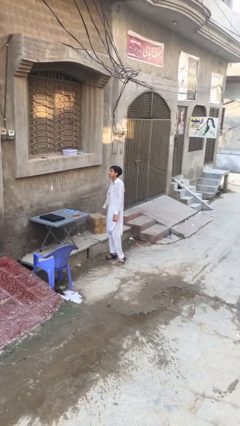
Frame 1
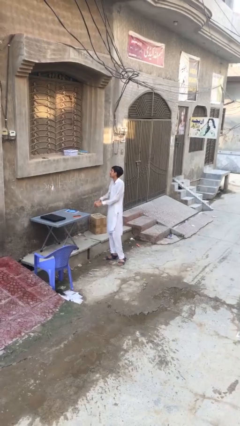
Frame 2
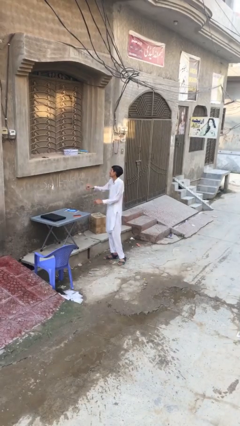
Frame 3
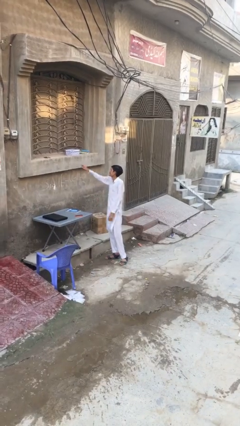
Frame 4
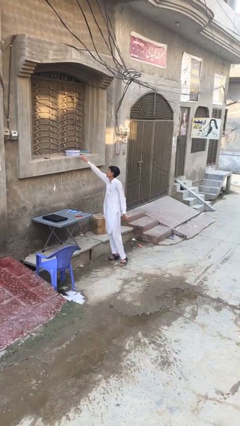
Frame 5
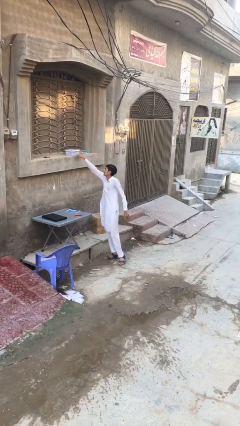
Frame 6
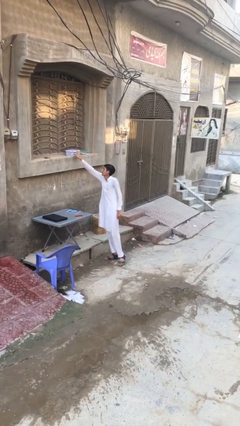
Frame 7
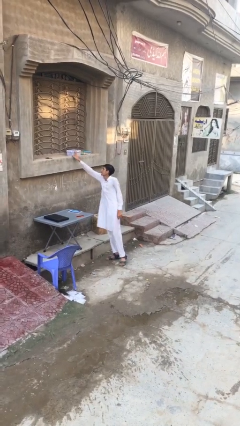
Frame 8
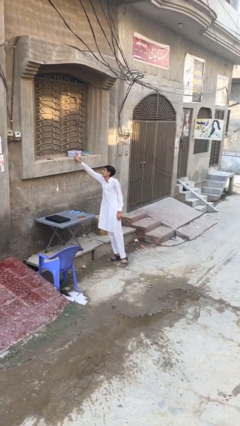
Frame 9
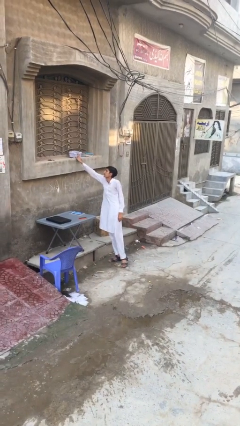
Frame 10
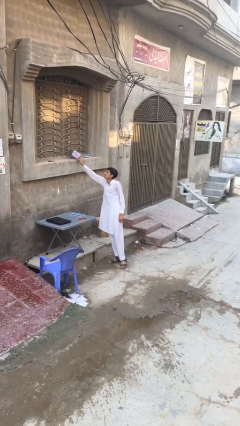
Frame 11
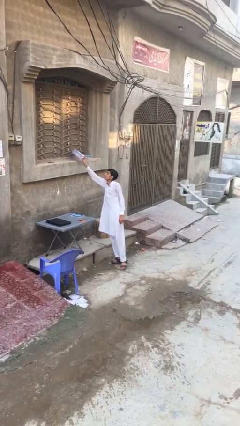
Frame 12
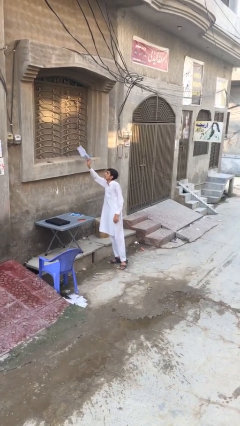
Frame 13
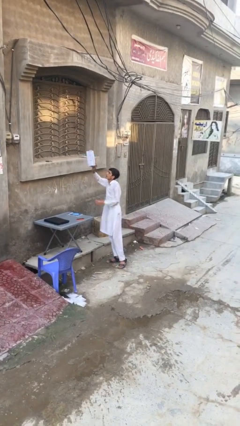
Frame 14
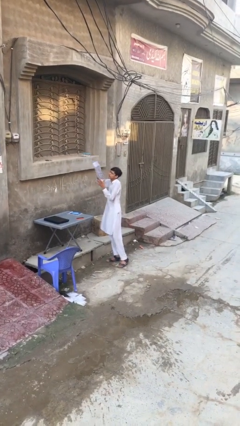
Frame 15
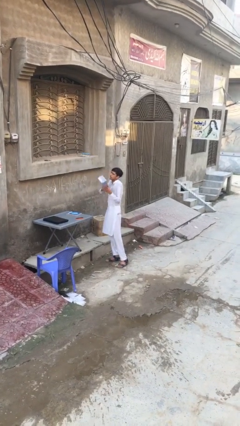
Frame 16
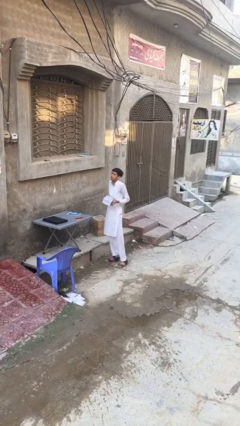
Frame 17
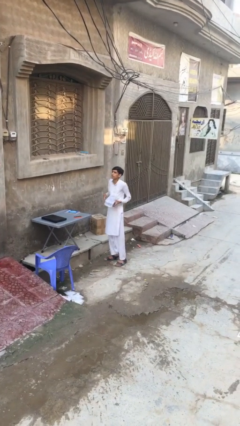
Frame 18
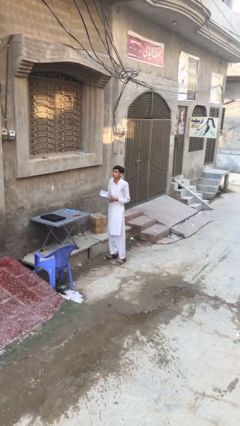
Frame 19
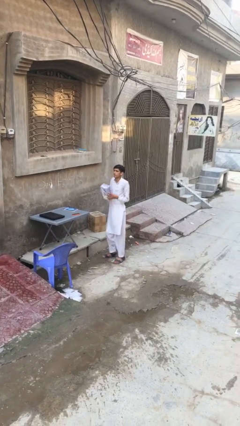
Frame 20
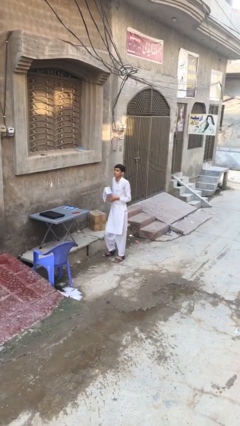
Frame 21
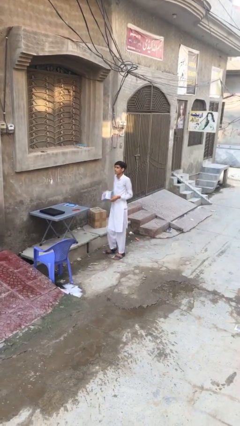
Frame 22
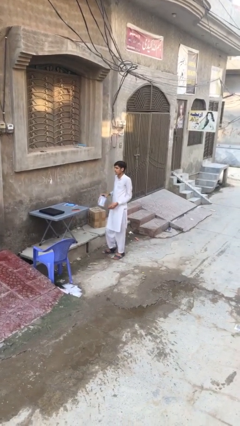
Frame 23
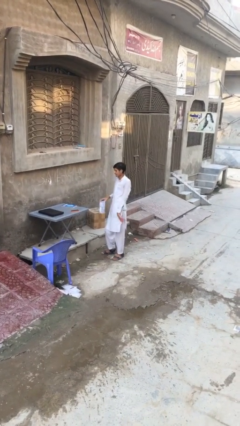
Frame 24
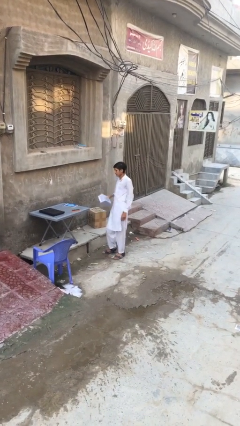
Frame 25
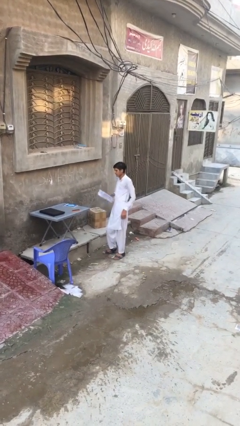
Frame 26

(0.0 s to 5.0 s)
person picks up object from shelf

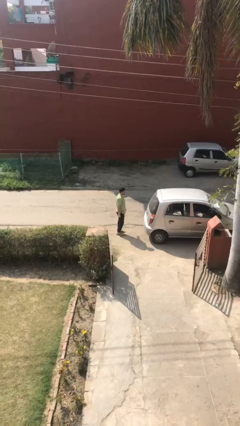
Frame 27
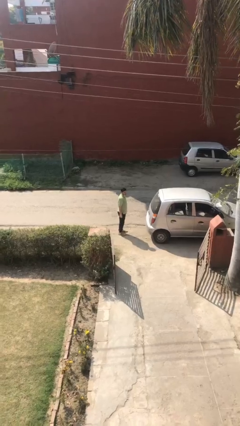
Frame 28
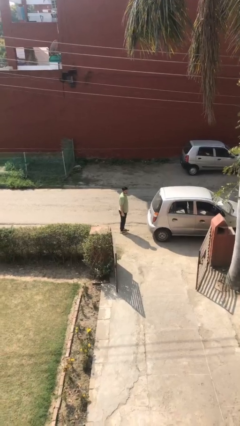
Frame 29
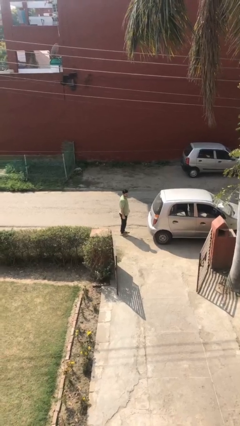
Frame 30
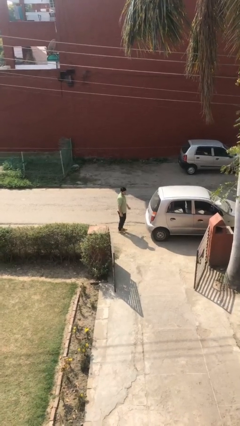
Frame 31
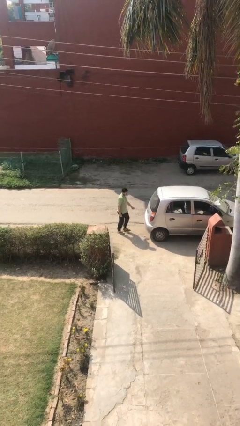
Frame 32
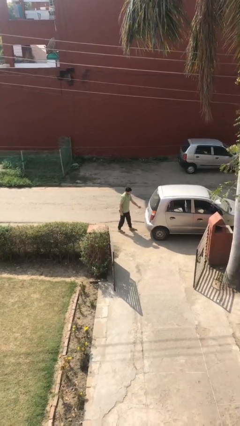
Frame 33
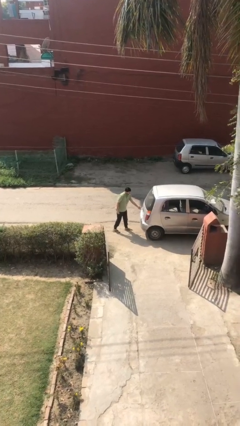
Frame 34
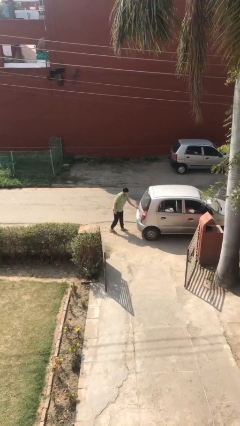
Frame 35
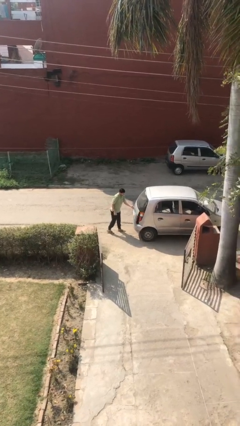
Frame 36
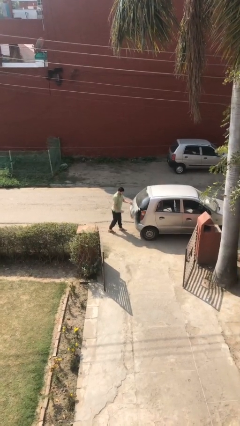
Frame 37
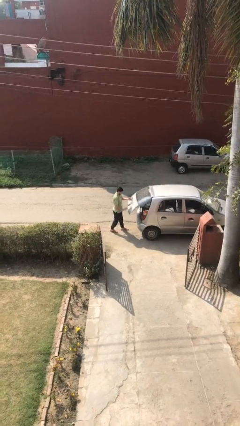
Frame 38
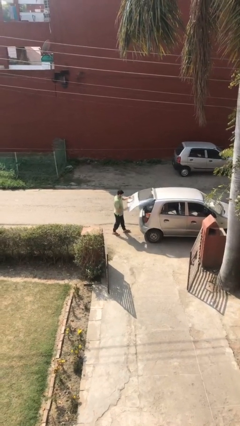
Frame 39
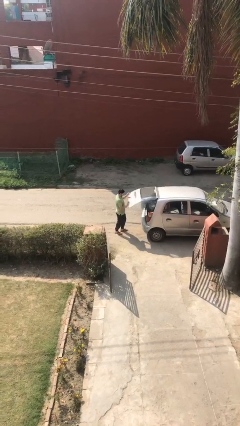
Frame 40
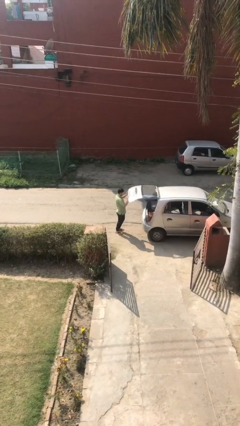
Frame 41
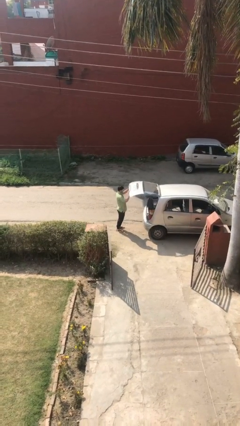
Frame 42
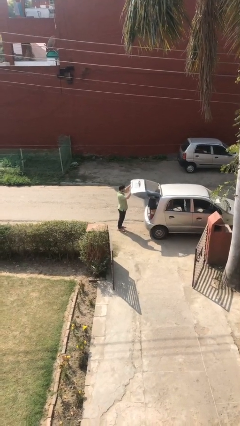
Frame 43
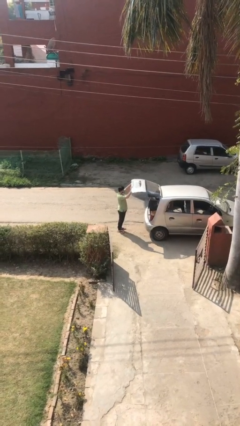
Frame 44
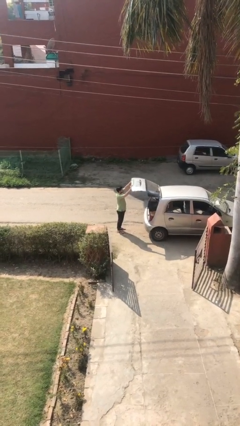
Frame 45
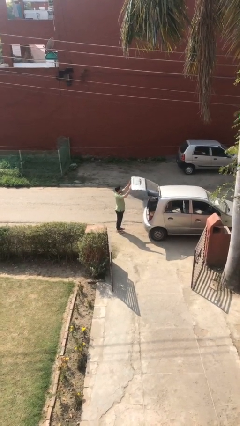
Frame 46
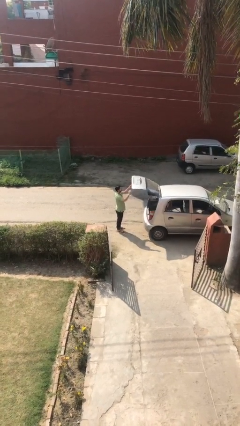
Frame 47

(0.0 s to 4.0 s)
person opens car trunk

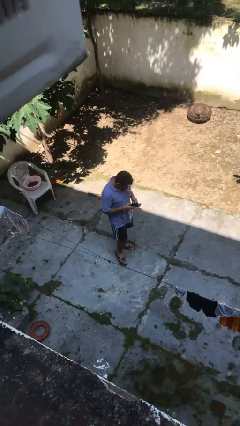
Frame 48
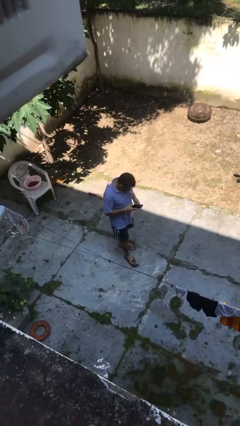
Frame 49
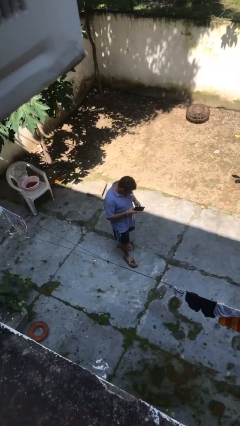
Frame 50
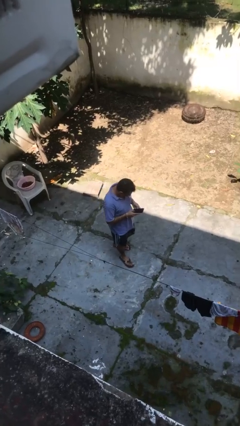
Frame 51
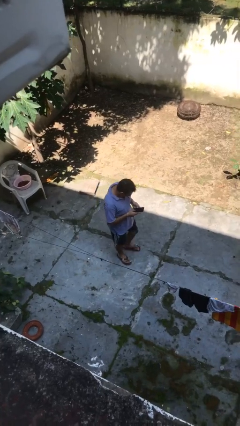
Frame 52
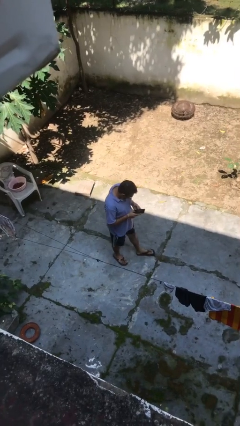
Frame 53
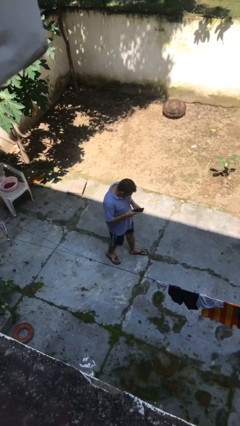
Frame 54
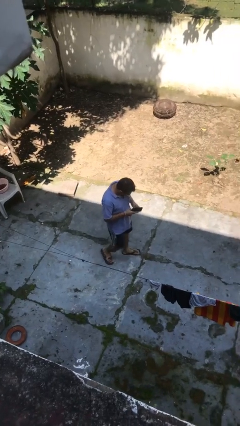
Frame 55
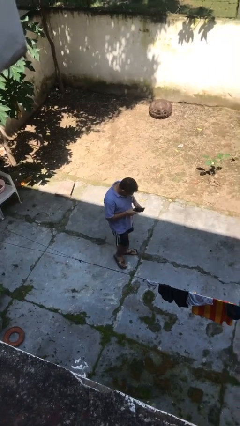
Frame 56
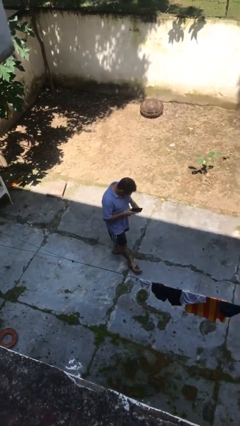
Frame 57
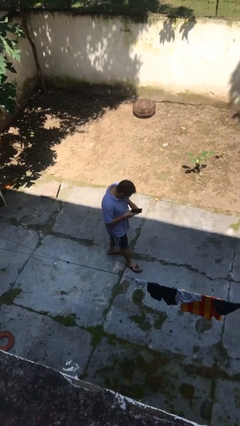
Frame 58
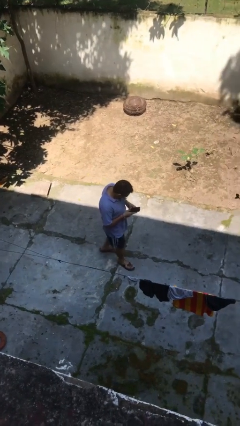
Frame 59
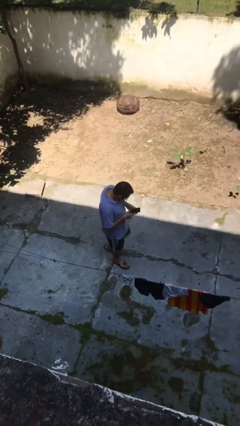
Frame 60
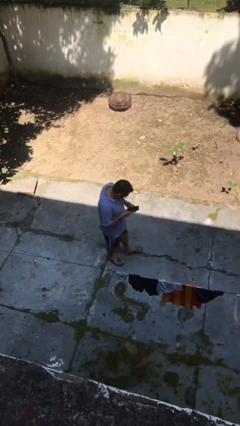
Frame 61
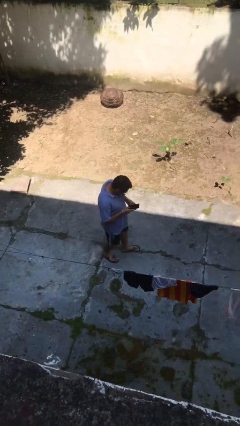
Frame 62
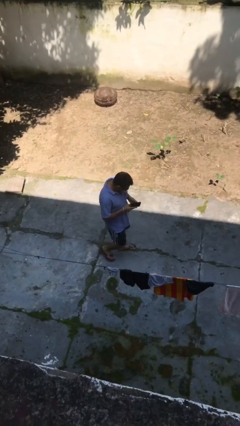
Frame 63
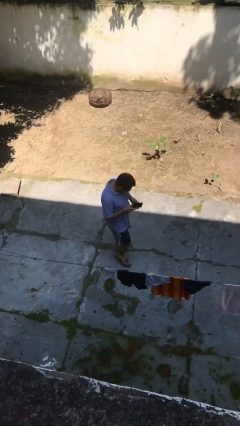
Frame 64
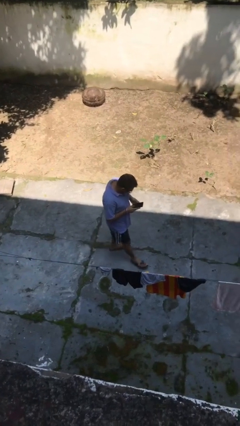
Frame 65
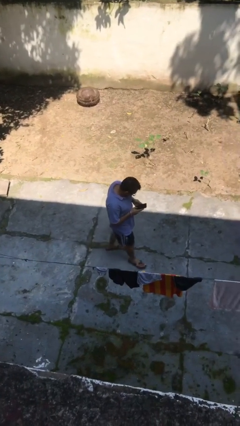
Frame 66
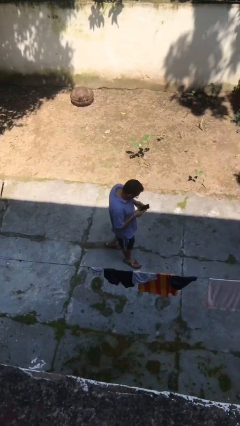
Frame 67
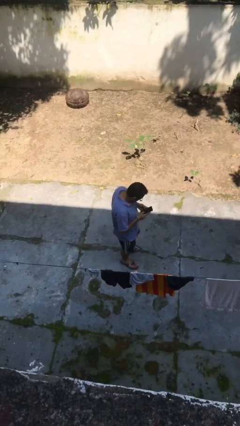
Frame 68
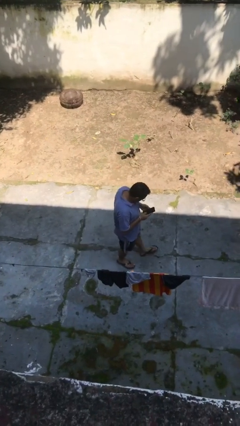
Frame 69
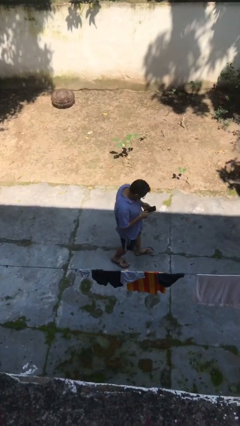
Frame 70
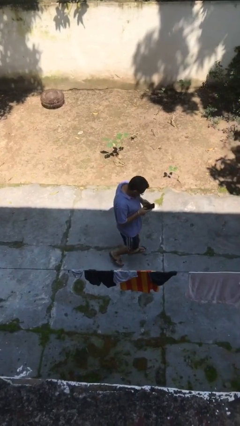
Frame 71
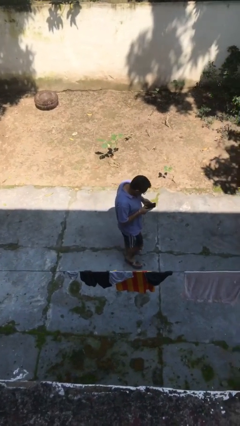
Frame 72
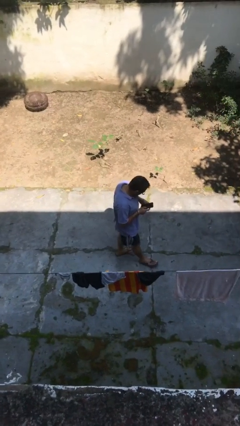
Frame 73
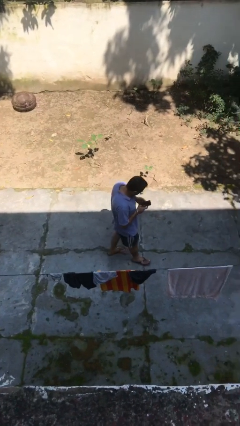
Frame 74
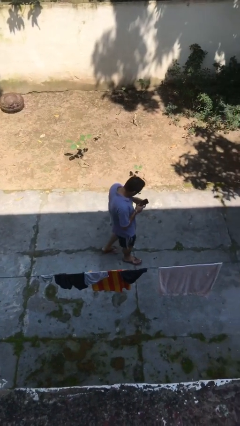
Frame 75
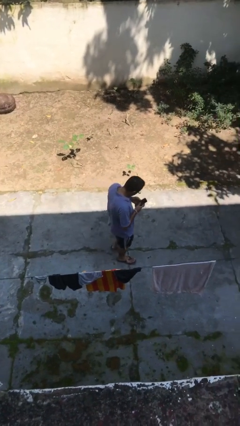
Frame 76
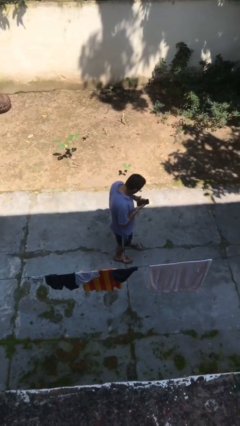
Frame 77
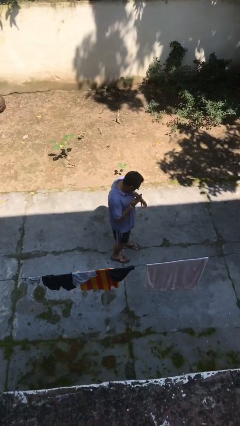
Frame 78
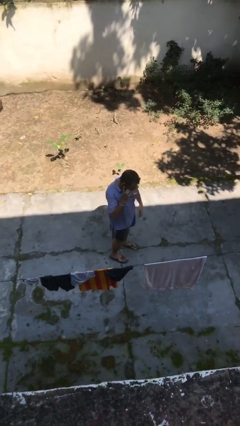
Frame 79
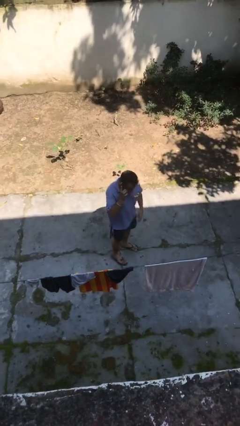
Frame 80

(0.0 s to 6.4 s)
person texts on phone

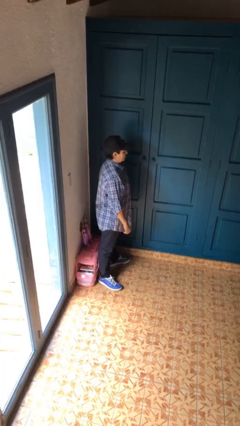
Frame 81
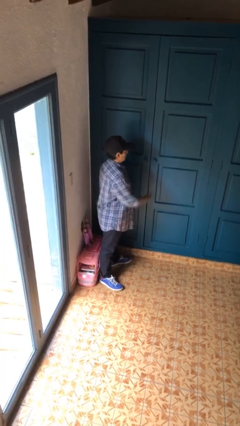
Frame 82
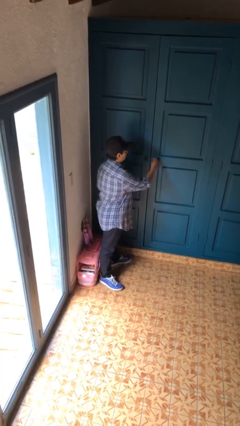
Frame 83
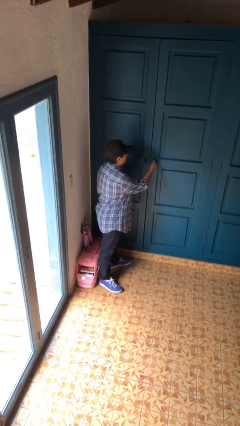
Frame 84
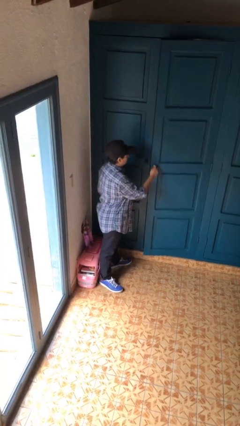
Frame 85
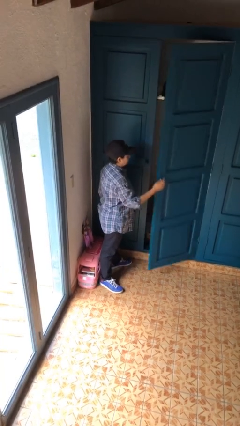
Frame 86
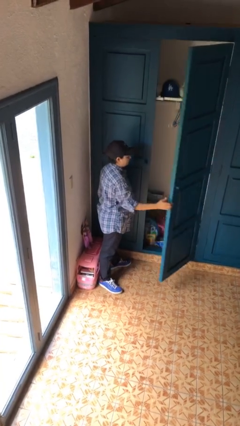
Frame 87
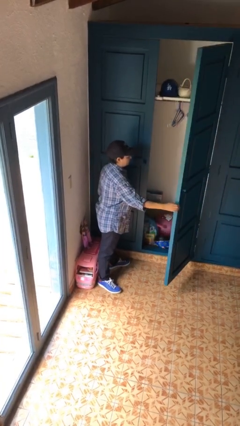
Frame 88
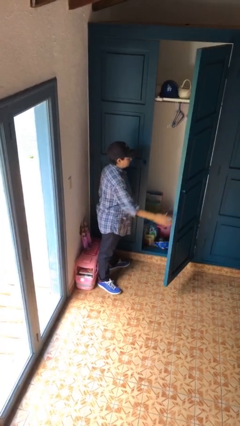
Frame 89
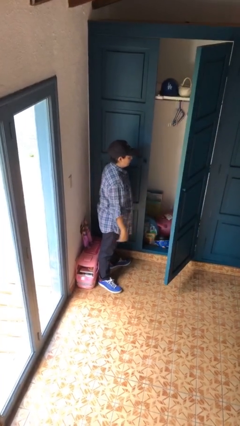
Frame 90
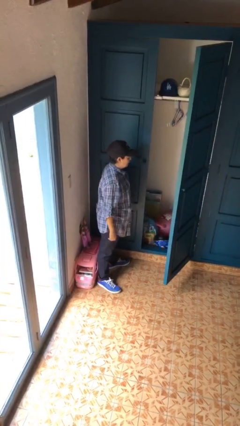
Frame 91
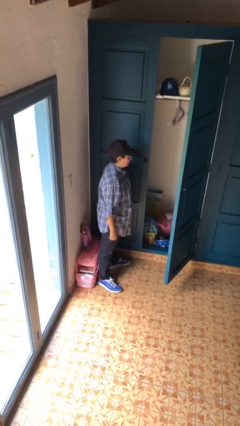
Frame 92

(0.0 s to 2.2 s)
person opens closet door
